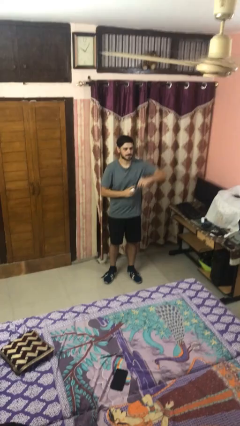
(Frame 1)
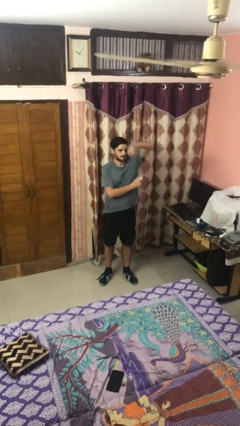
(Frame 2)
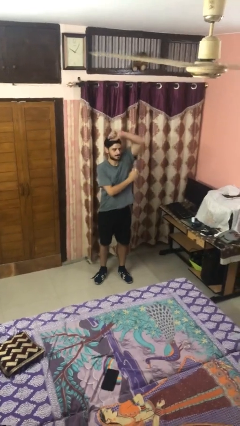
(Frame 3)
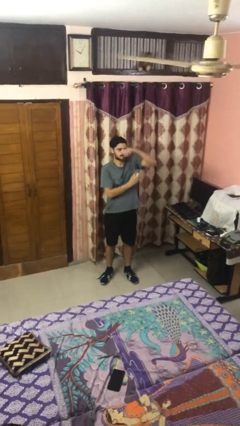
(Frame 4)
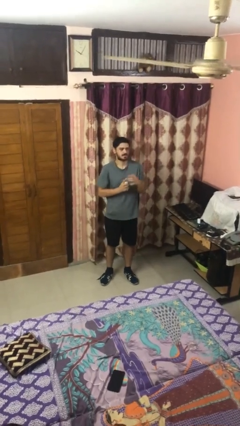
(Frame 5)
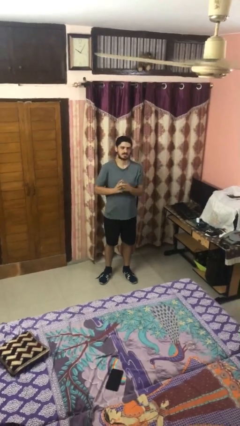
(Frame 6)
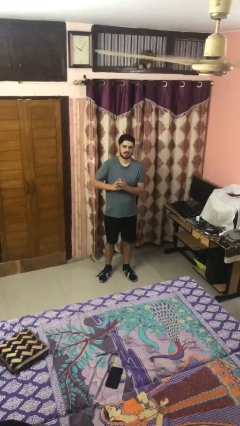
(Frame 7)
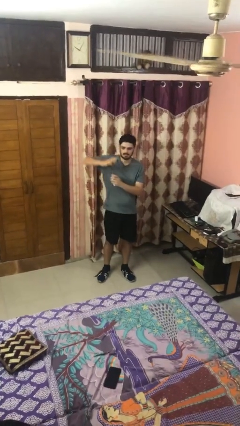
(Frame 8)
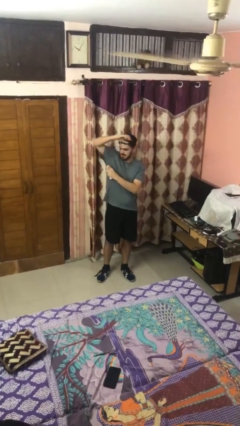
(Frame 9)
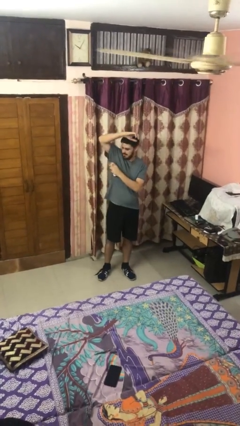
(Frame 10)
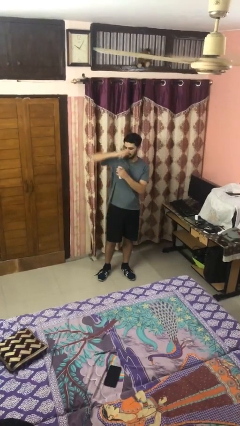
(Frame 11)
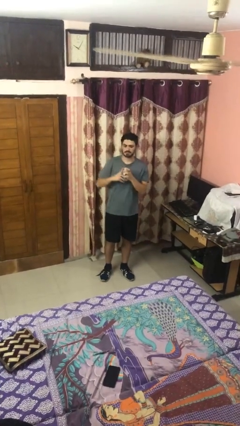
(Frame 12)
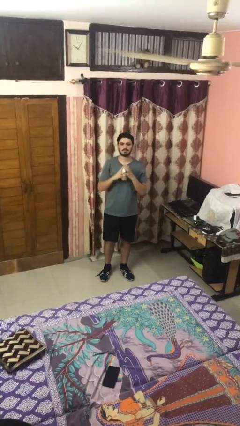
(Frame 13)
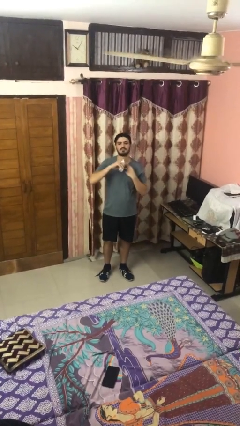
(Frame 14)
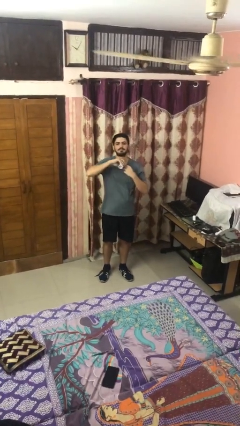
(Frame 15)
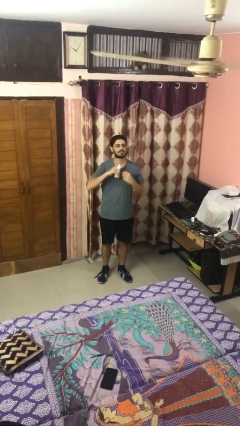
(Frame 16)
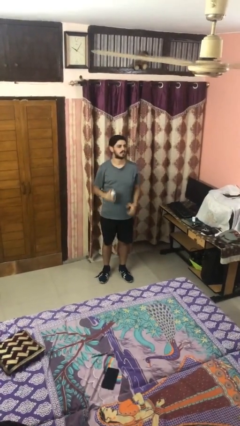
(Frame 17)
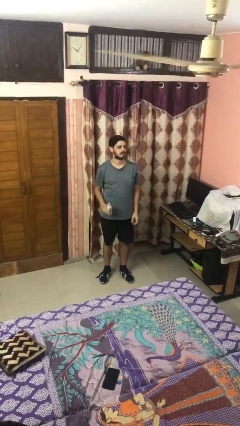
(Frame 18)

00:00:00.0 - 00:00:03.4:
person applies deodorant

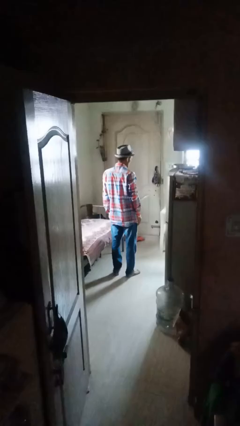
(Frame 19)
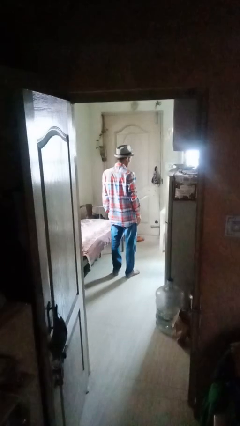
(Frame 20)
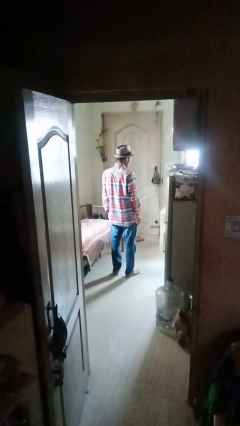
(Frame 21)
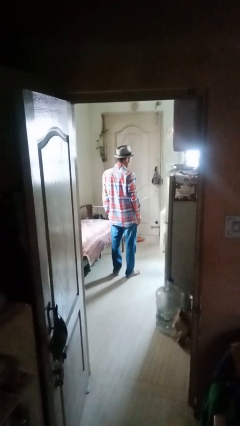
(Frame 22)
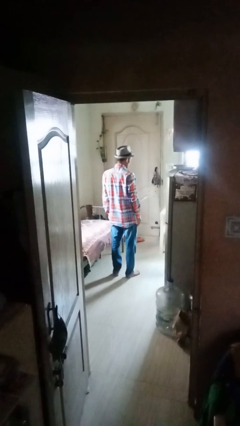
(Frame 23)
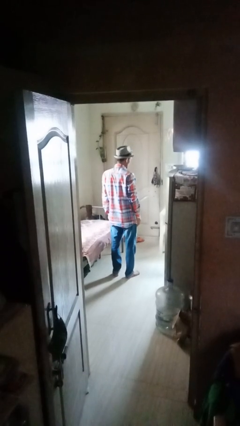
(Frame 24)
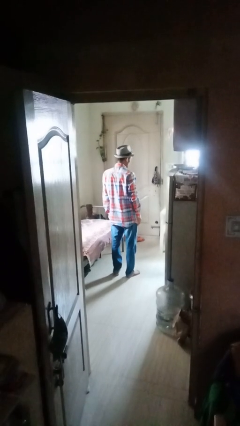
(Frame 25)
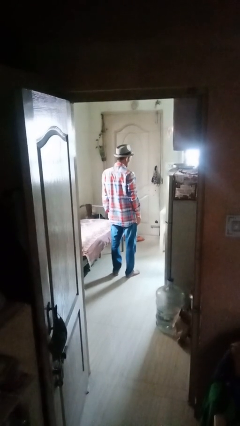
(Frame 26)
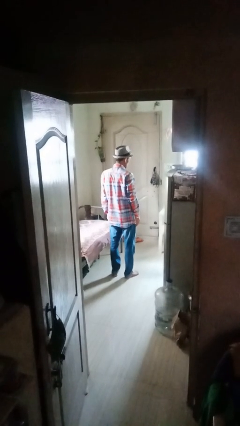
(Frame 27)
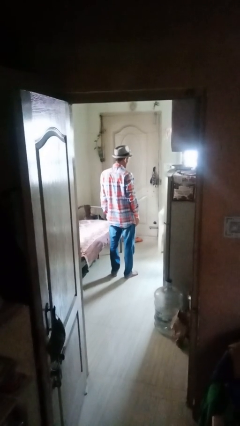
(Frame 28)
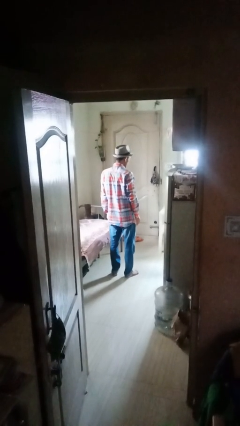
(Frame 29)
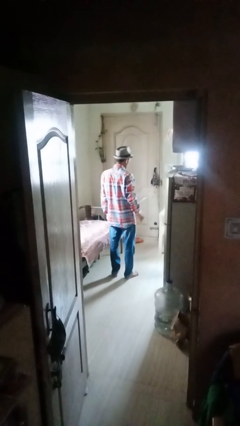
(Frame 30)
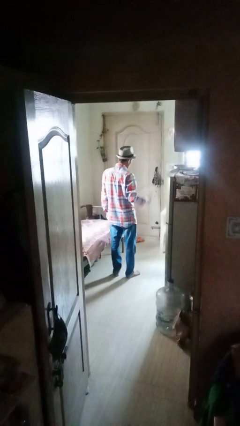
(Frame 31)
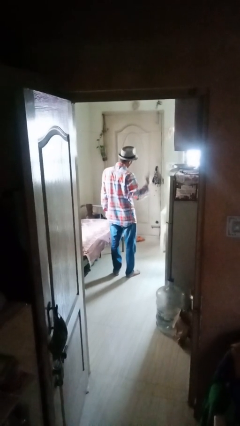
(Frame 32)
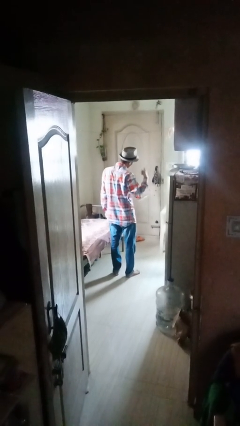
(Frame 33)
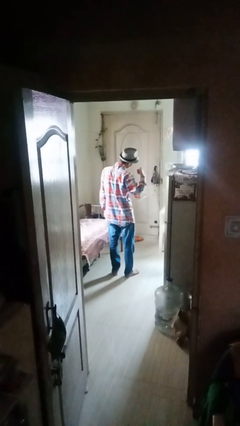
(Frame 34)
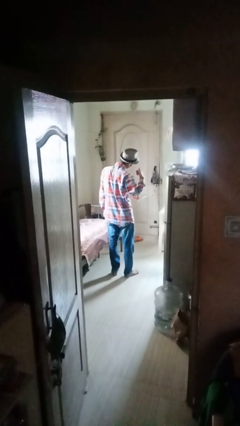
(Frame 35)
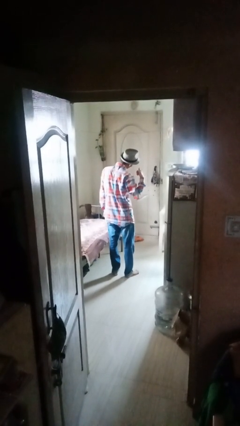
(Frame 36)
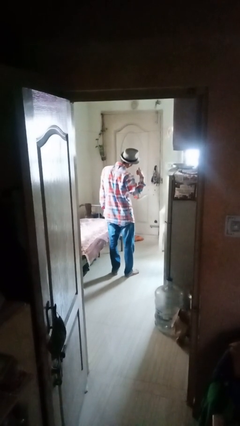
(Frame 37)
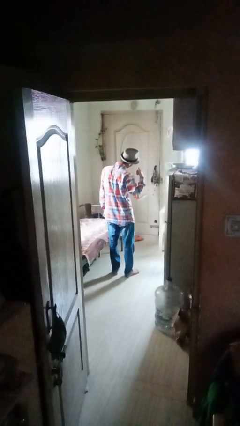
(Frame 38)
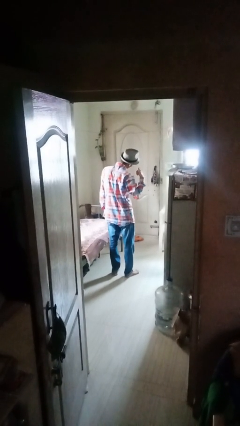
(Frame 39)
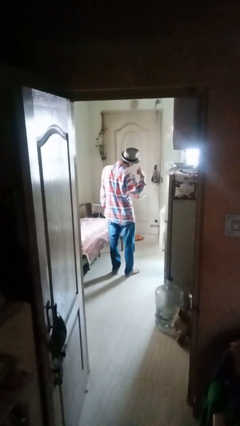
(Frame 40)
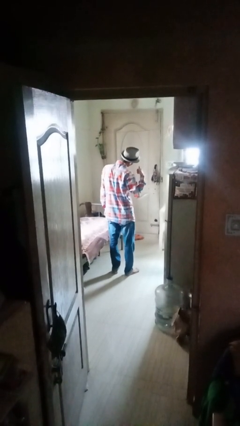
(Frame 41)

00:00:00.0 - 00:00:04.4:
person gestures call me

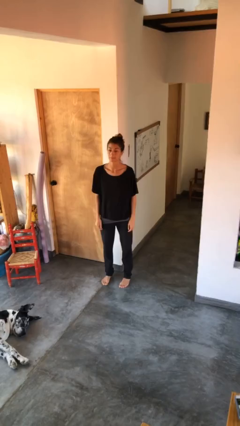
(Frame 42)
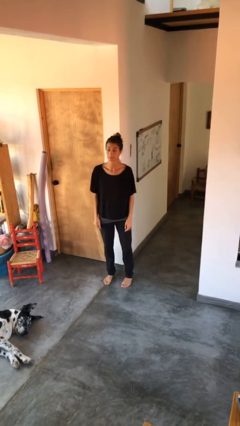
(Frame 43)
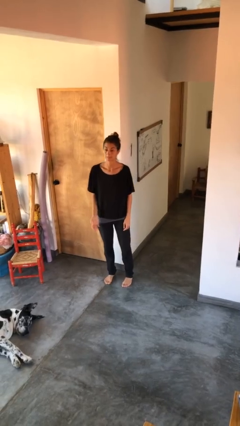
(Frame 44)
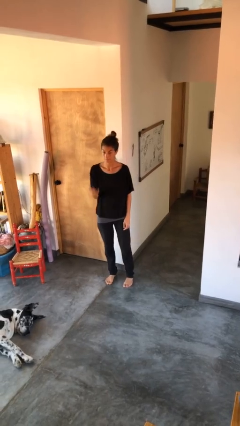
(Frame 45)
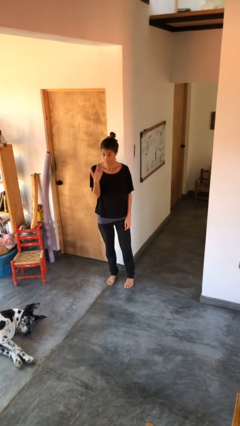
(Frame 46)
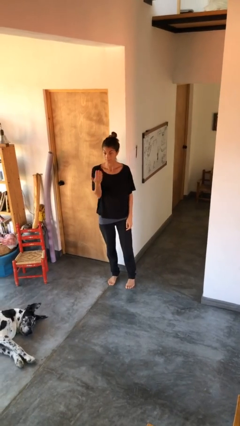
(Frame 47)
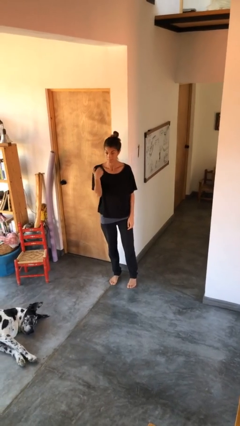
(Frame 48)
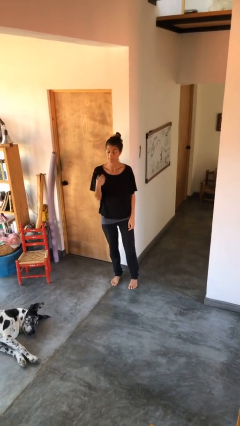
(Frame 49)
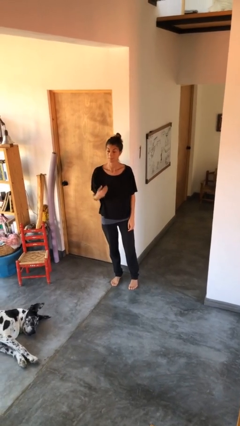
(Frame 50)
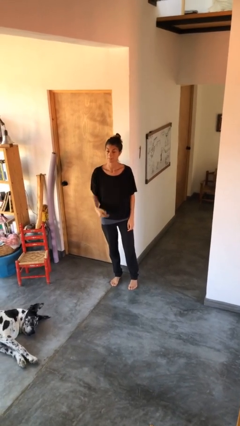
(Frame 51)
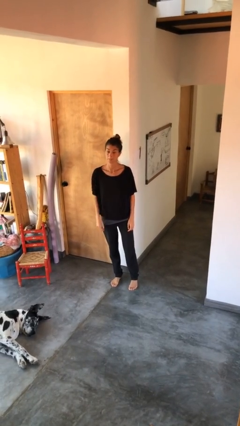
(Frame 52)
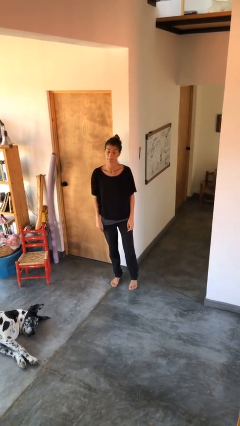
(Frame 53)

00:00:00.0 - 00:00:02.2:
person gestures come here

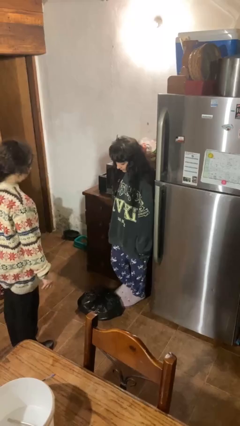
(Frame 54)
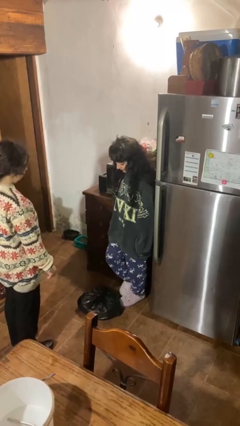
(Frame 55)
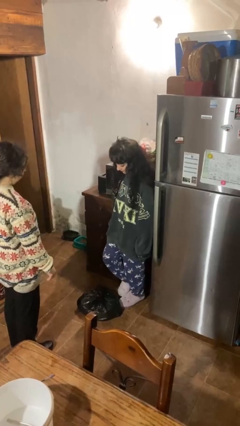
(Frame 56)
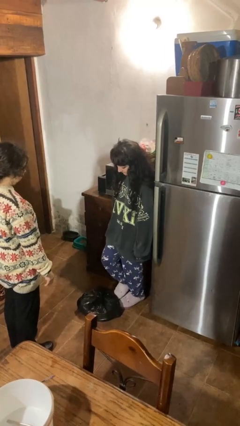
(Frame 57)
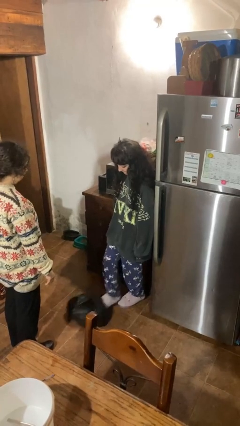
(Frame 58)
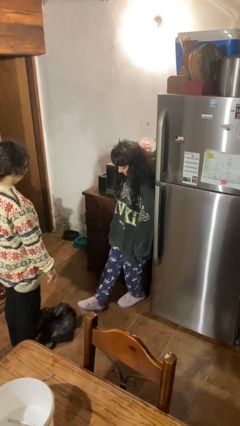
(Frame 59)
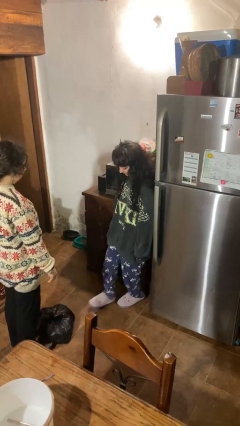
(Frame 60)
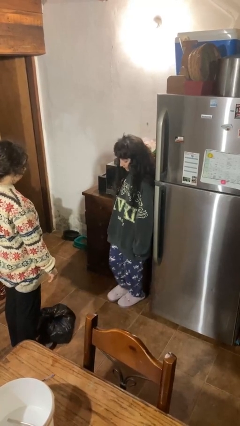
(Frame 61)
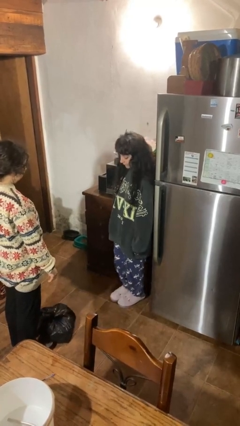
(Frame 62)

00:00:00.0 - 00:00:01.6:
person kicks object to person

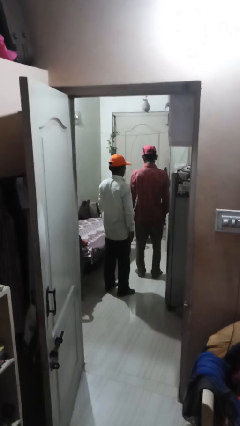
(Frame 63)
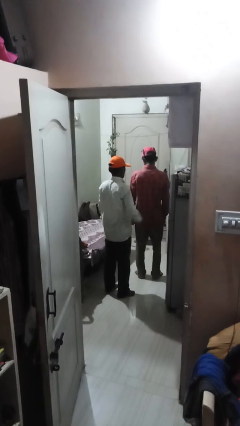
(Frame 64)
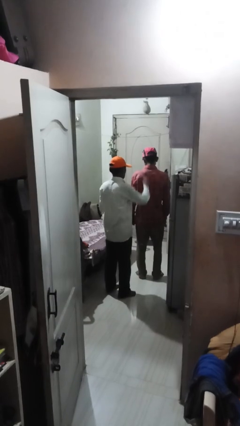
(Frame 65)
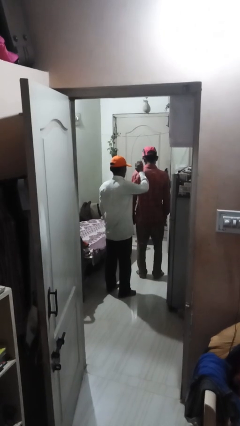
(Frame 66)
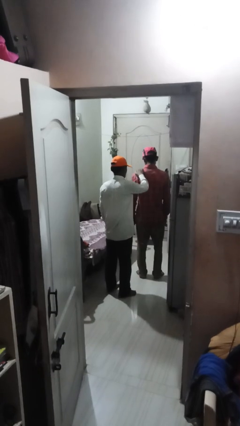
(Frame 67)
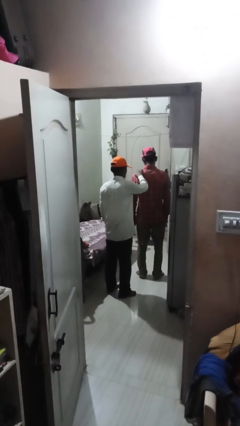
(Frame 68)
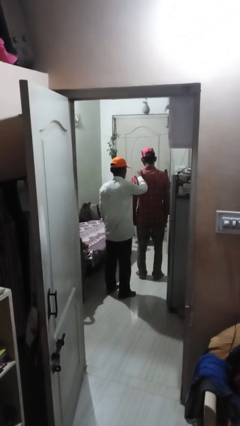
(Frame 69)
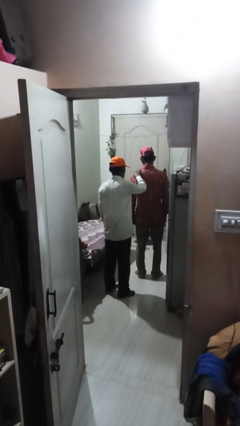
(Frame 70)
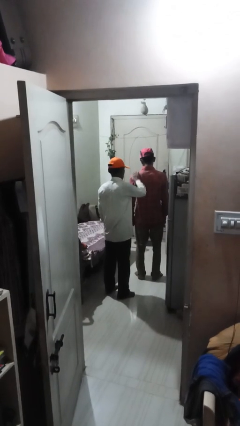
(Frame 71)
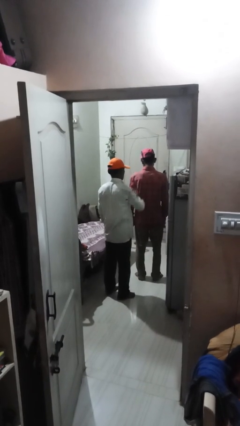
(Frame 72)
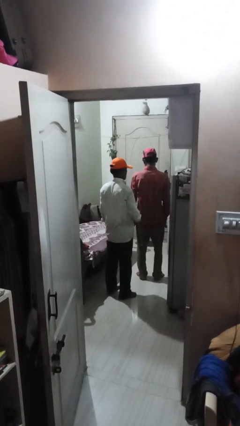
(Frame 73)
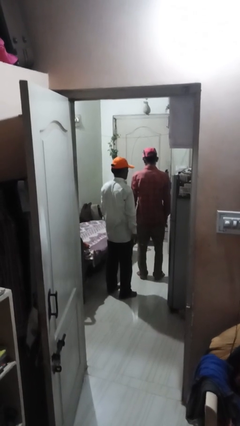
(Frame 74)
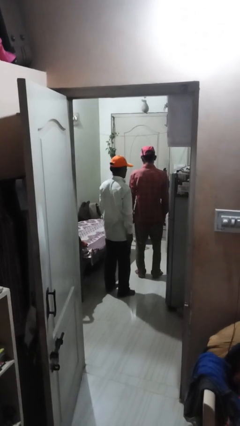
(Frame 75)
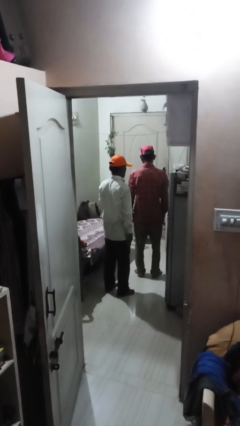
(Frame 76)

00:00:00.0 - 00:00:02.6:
person touches back of person

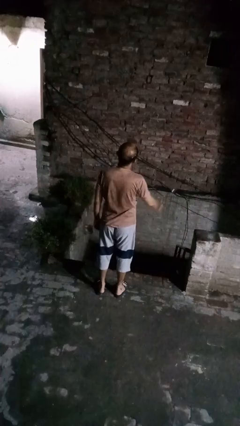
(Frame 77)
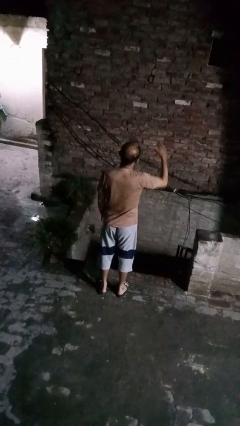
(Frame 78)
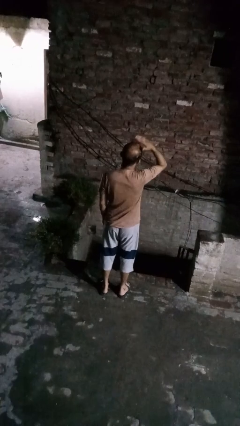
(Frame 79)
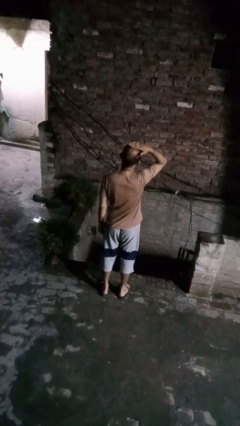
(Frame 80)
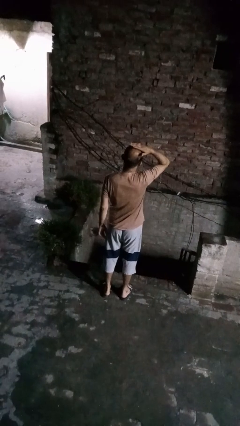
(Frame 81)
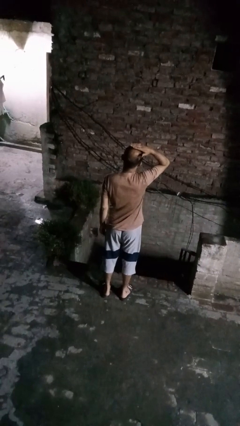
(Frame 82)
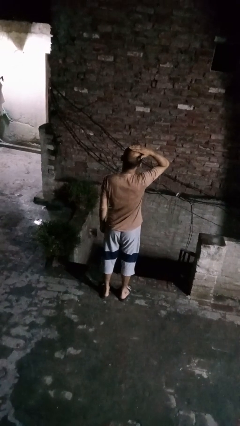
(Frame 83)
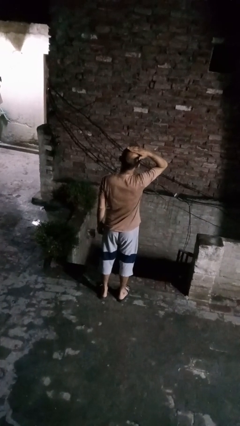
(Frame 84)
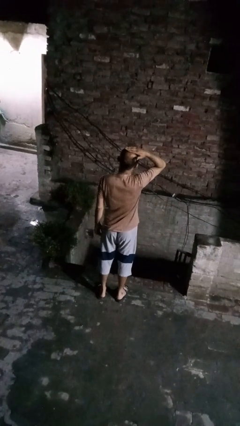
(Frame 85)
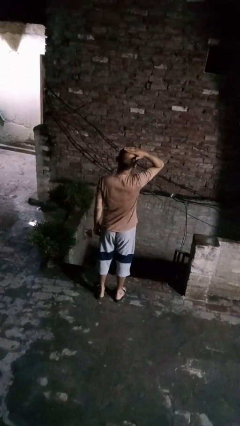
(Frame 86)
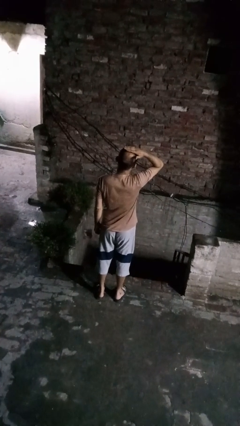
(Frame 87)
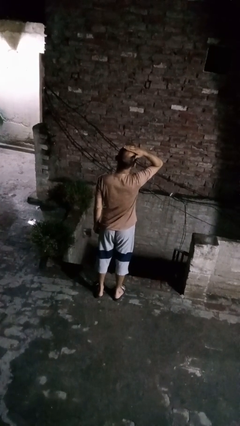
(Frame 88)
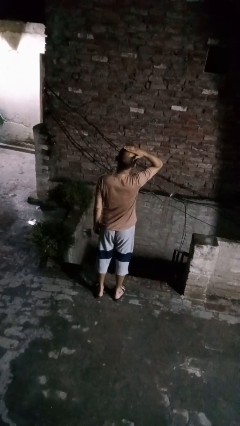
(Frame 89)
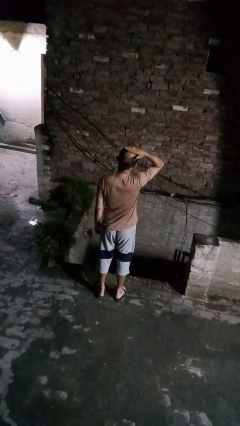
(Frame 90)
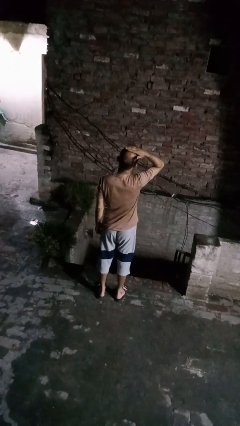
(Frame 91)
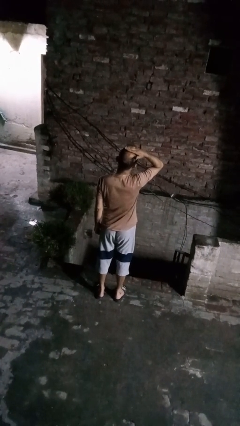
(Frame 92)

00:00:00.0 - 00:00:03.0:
person pats head
